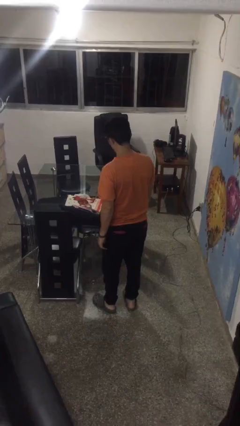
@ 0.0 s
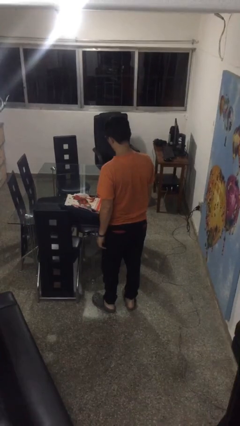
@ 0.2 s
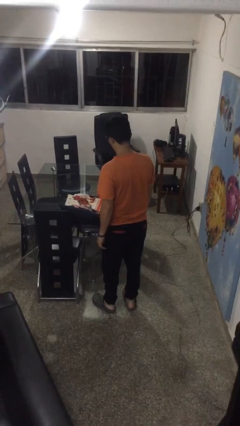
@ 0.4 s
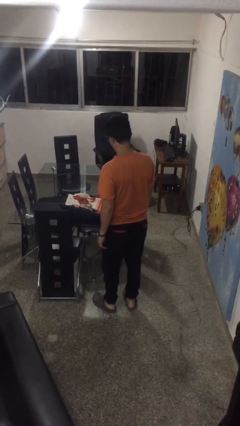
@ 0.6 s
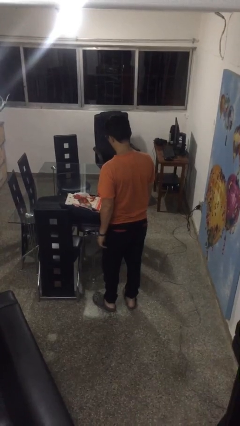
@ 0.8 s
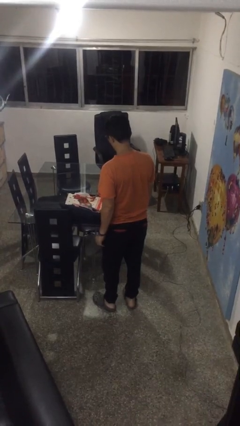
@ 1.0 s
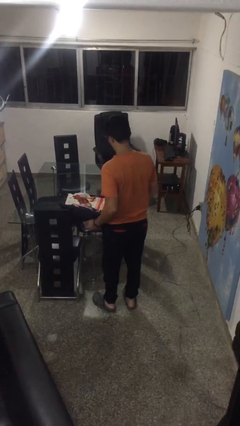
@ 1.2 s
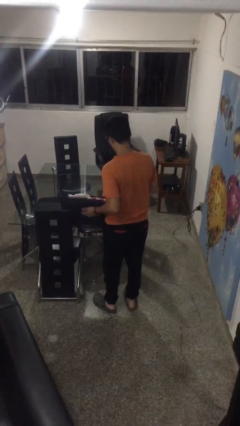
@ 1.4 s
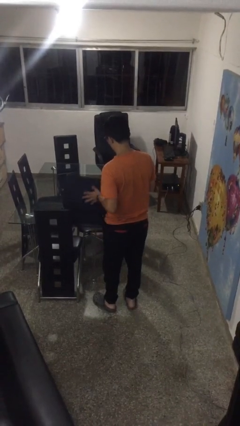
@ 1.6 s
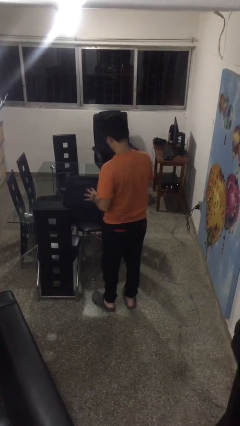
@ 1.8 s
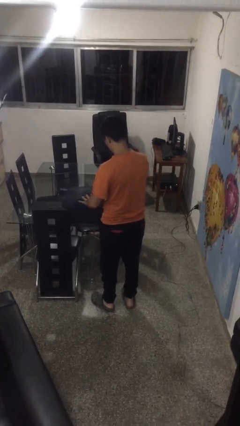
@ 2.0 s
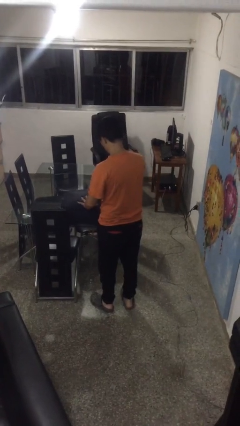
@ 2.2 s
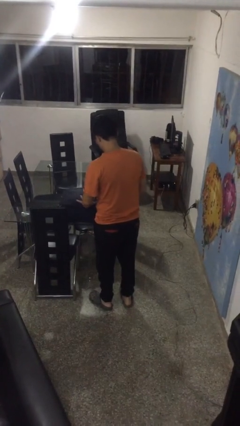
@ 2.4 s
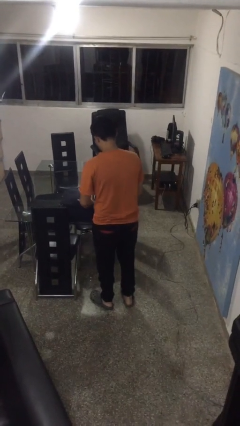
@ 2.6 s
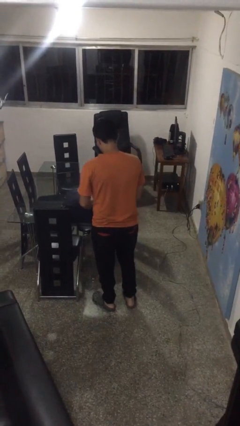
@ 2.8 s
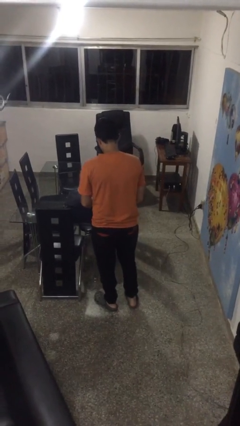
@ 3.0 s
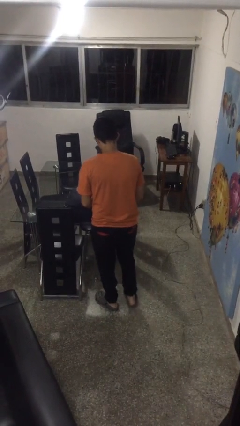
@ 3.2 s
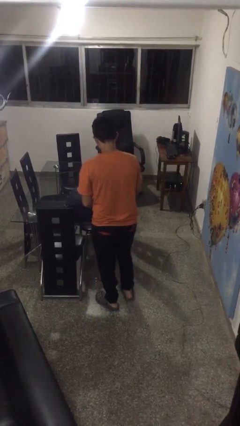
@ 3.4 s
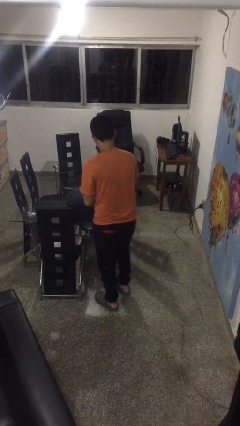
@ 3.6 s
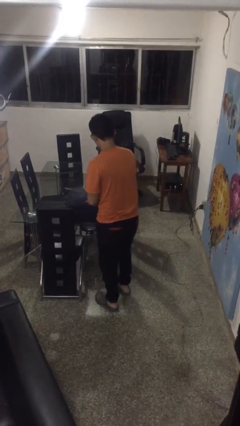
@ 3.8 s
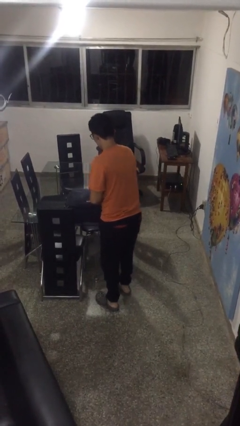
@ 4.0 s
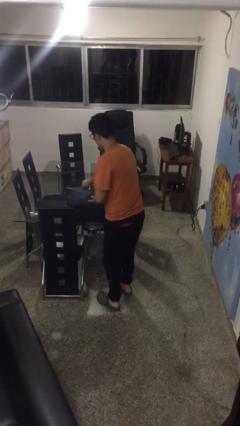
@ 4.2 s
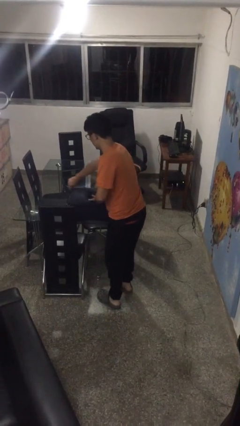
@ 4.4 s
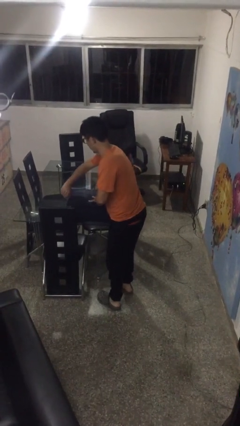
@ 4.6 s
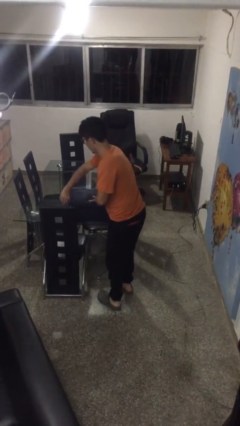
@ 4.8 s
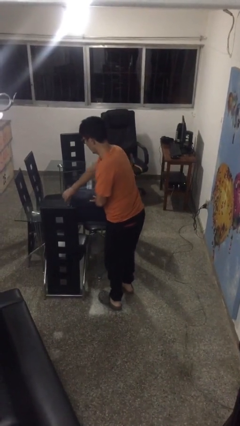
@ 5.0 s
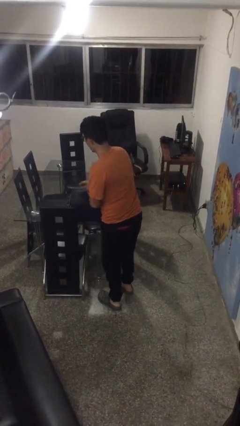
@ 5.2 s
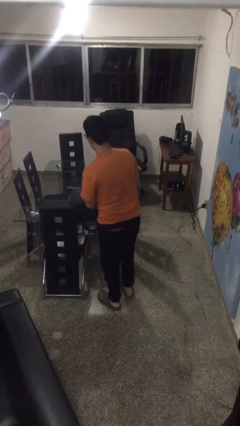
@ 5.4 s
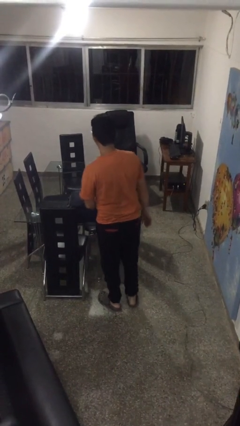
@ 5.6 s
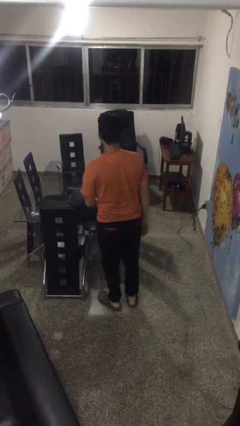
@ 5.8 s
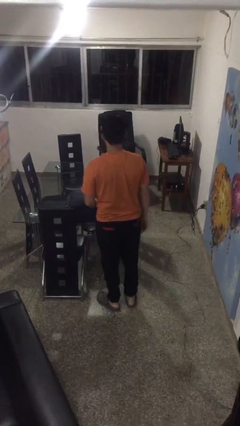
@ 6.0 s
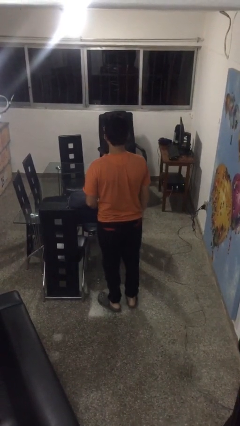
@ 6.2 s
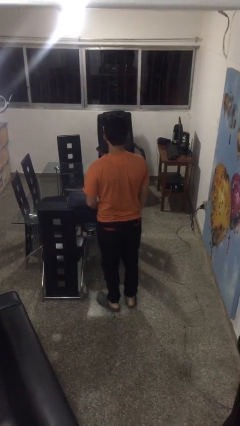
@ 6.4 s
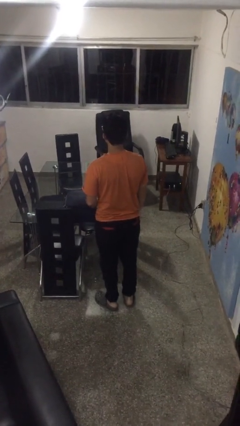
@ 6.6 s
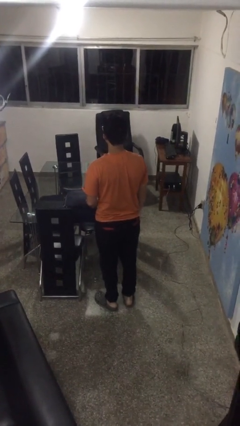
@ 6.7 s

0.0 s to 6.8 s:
person closes suitcase

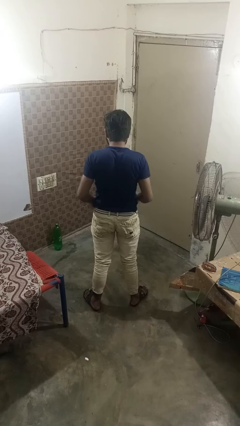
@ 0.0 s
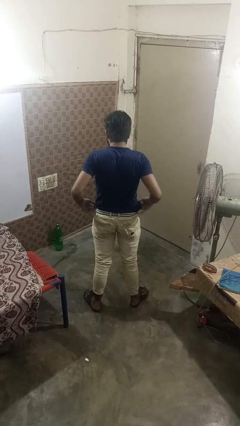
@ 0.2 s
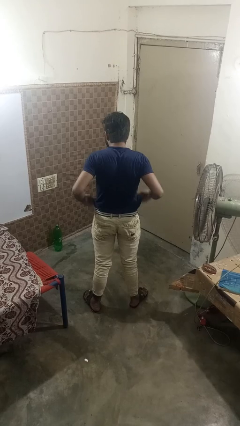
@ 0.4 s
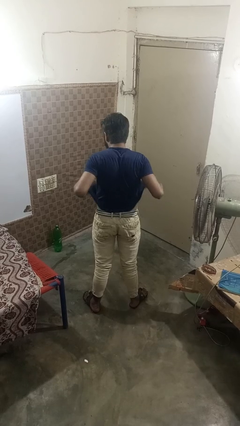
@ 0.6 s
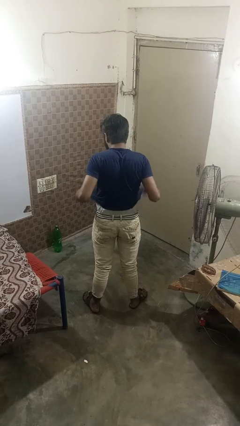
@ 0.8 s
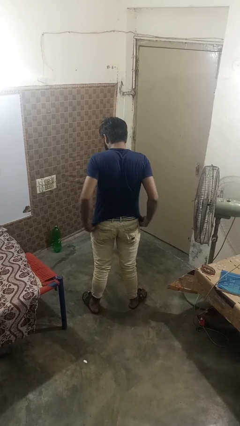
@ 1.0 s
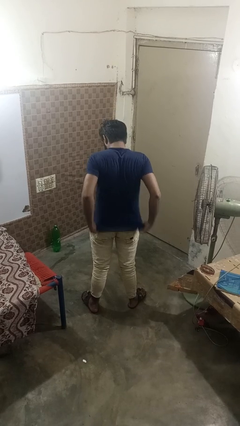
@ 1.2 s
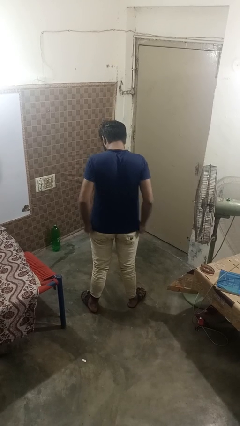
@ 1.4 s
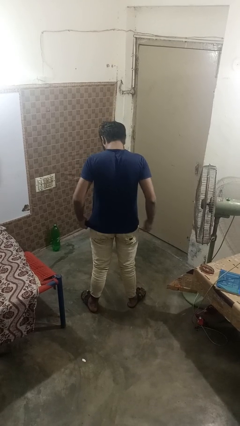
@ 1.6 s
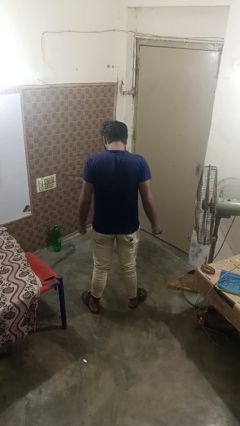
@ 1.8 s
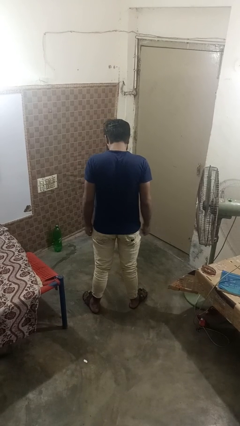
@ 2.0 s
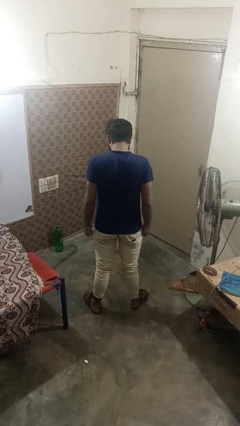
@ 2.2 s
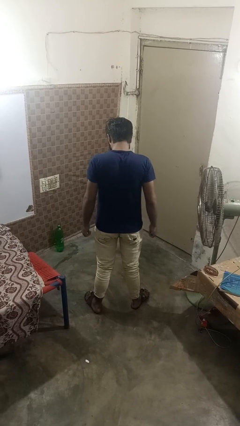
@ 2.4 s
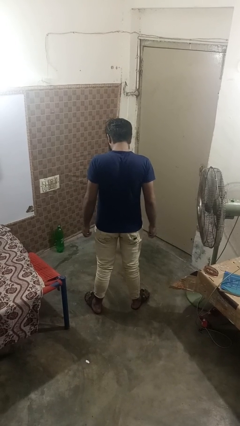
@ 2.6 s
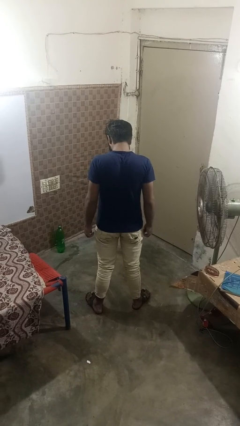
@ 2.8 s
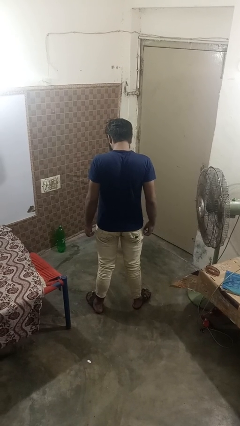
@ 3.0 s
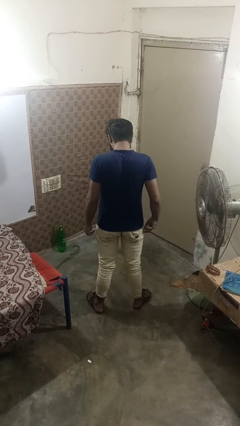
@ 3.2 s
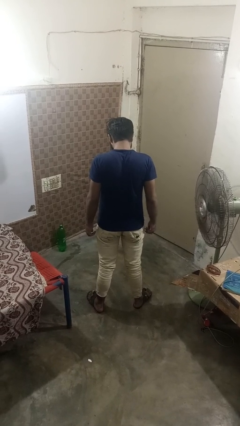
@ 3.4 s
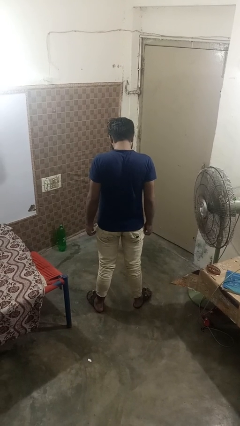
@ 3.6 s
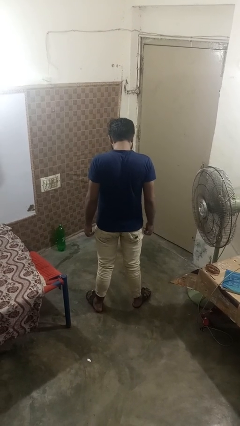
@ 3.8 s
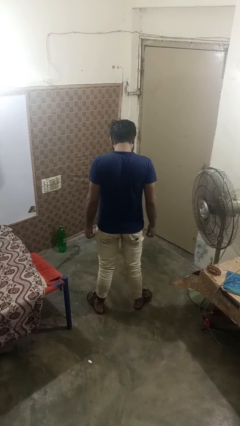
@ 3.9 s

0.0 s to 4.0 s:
person untucks shirt

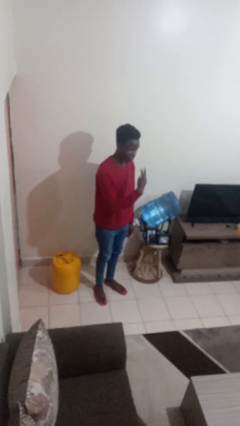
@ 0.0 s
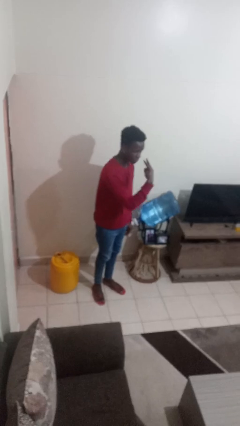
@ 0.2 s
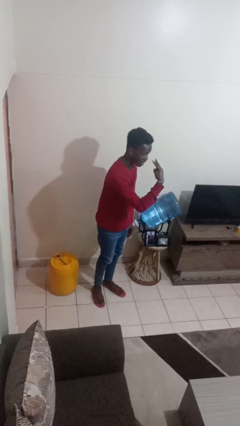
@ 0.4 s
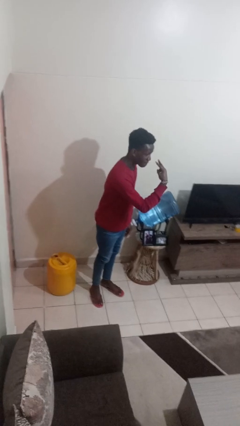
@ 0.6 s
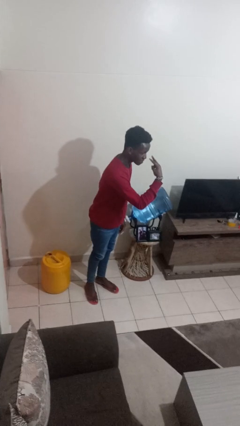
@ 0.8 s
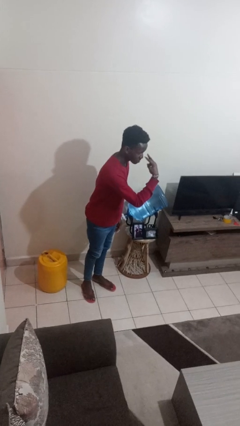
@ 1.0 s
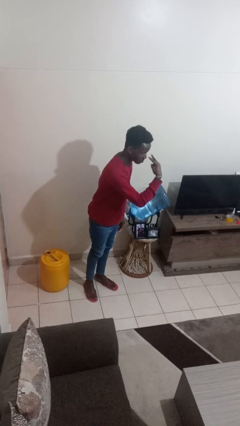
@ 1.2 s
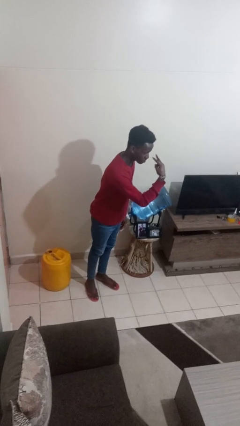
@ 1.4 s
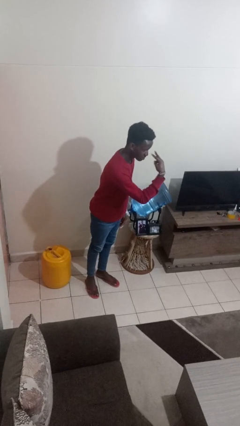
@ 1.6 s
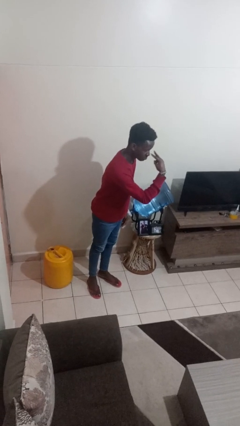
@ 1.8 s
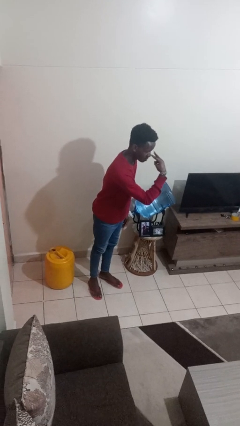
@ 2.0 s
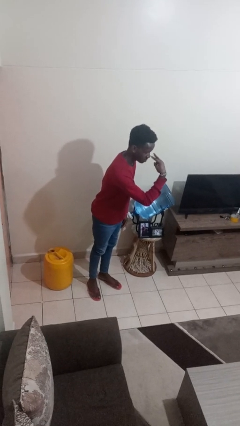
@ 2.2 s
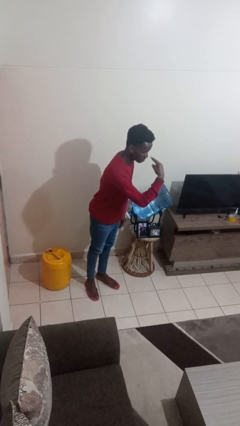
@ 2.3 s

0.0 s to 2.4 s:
person gestures watch closely

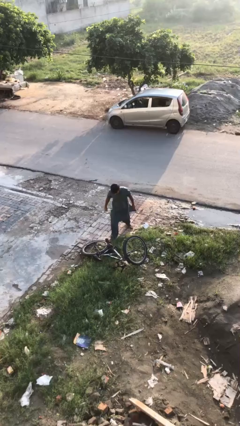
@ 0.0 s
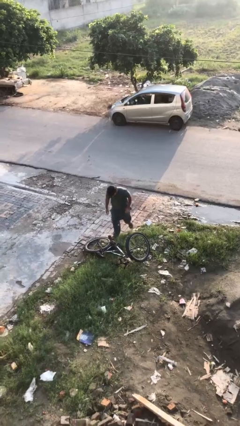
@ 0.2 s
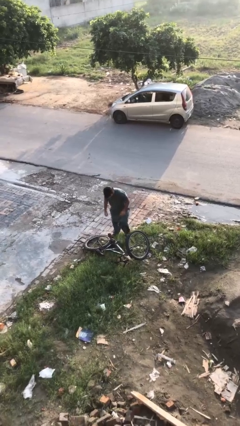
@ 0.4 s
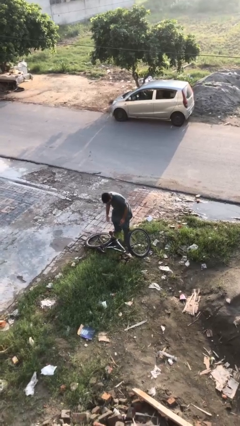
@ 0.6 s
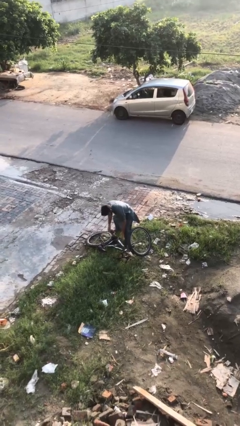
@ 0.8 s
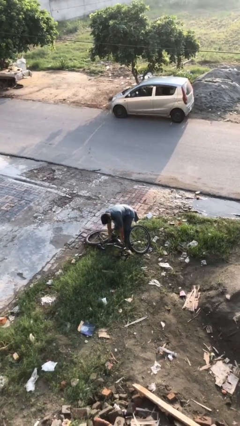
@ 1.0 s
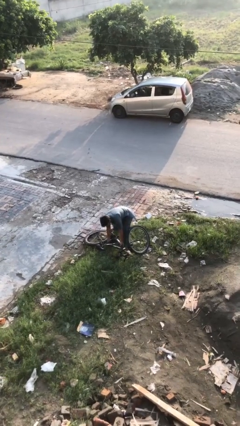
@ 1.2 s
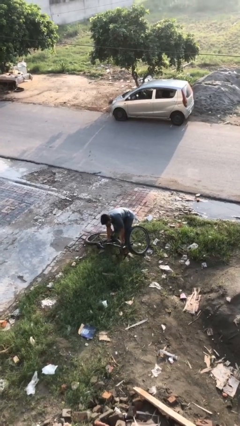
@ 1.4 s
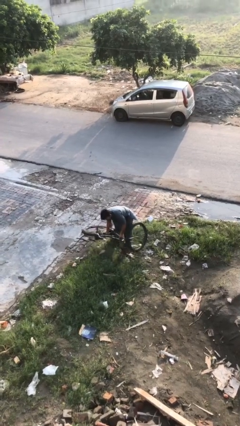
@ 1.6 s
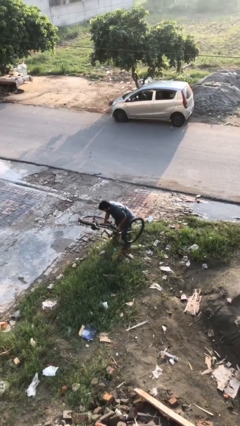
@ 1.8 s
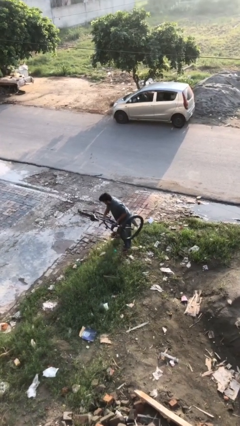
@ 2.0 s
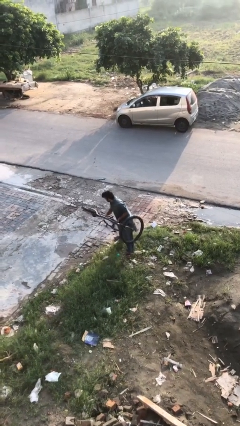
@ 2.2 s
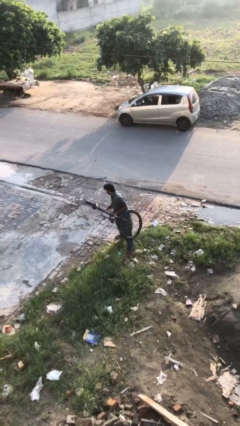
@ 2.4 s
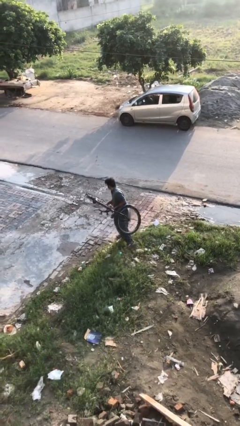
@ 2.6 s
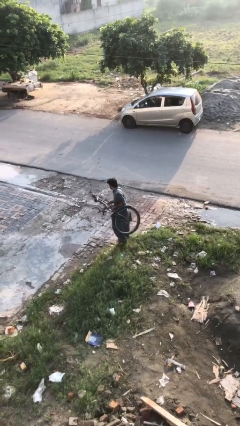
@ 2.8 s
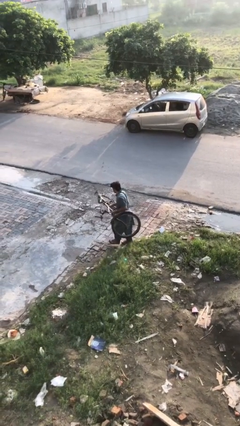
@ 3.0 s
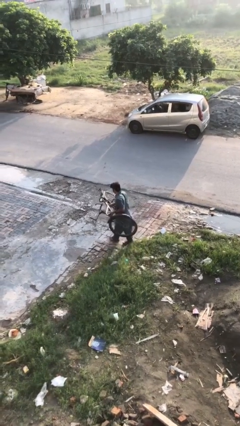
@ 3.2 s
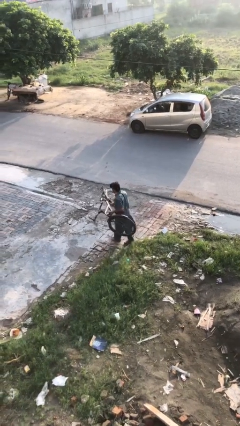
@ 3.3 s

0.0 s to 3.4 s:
person picks up object from floor

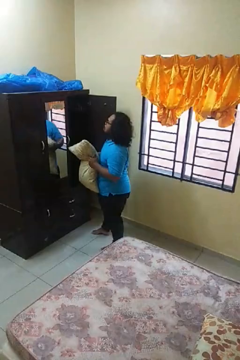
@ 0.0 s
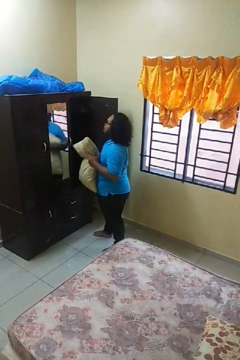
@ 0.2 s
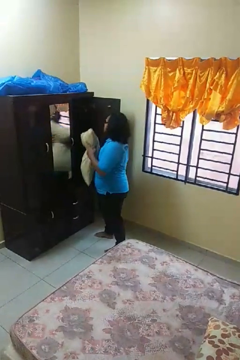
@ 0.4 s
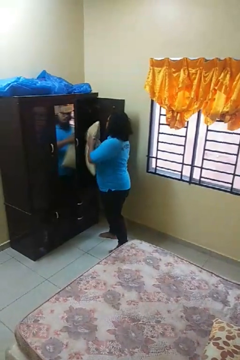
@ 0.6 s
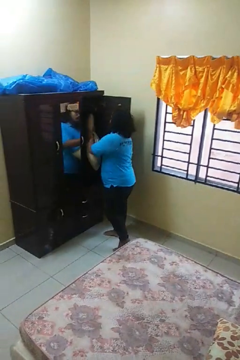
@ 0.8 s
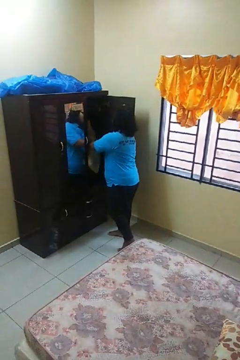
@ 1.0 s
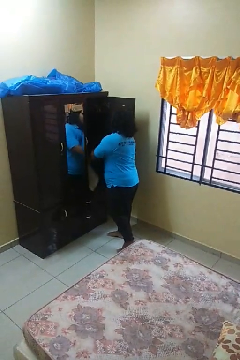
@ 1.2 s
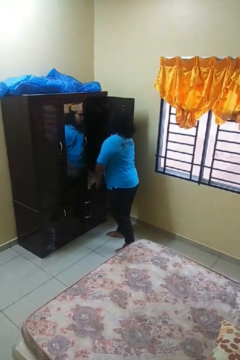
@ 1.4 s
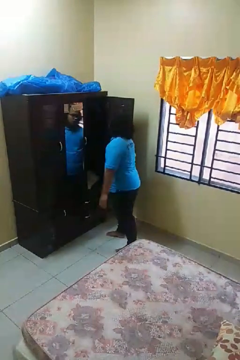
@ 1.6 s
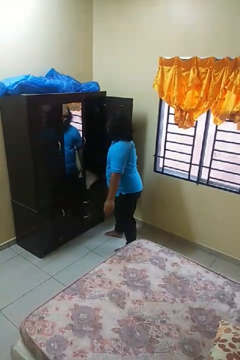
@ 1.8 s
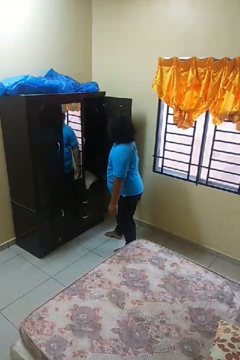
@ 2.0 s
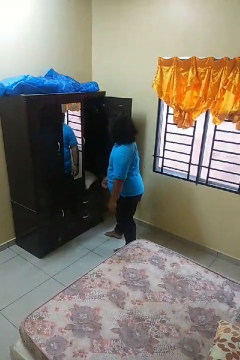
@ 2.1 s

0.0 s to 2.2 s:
person puts down object into cabinet
